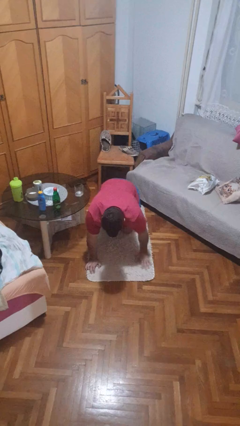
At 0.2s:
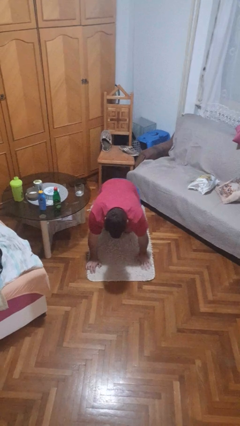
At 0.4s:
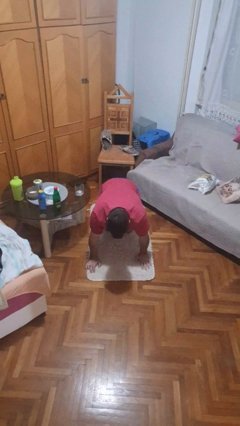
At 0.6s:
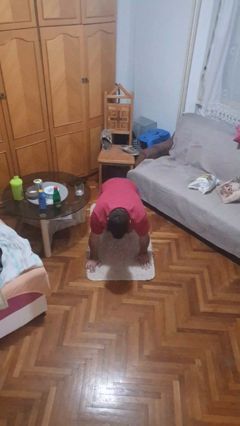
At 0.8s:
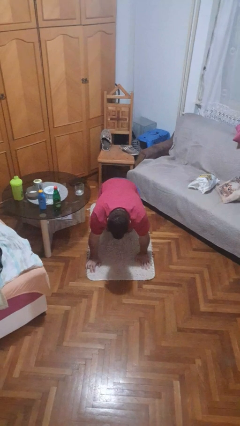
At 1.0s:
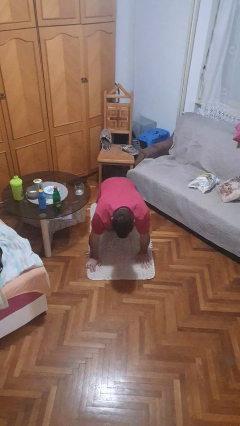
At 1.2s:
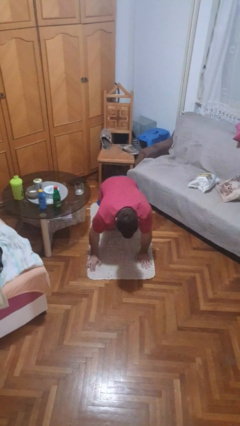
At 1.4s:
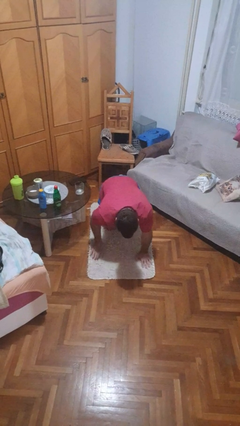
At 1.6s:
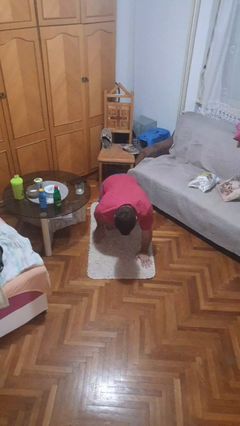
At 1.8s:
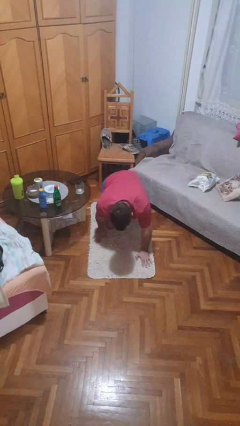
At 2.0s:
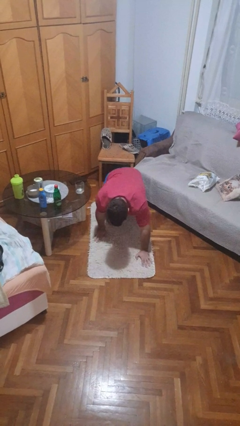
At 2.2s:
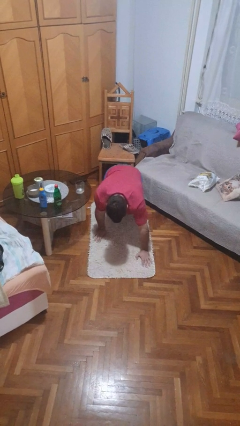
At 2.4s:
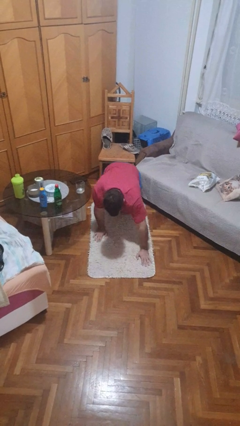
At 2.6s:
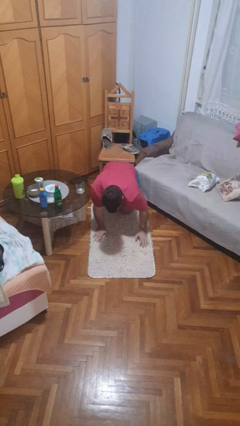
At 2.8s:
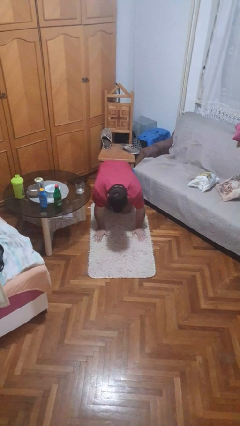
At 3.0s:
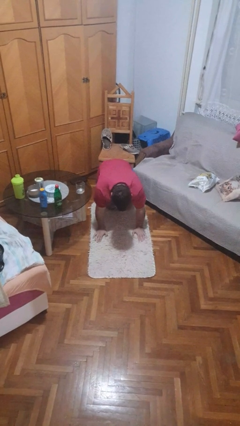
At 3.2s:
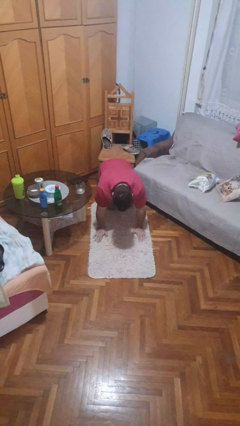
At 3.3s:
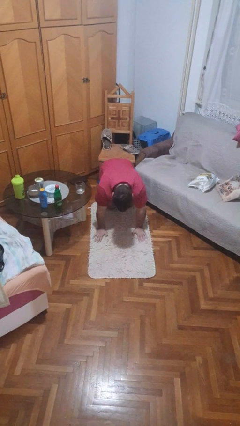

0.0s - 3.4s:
person crawls

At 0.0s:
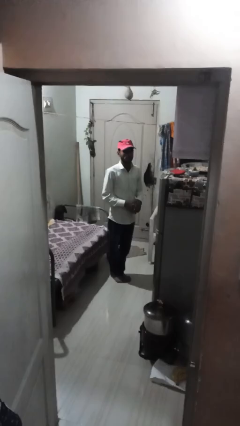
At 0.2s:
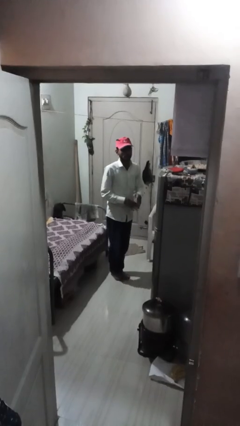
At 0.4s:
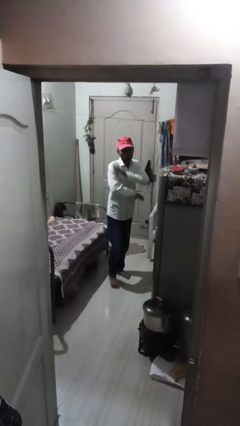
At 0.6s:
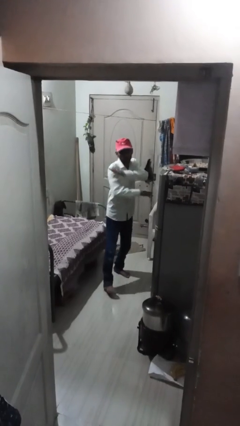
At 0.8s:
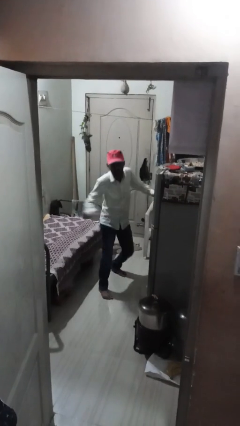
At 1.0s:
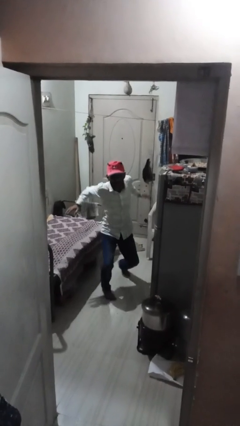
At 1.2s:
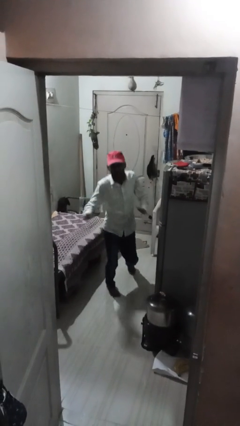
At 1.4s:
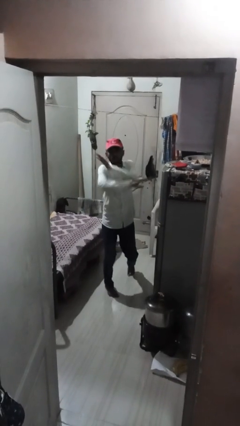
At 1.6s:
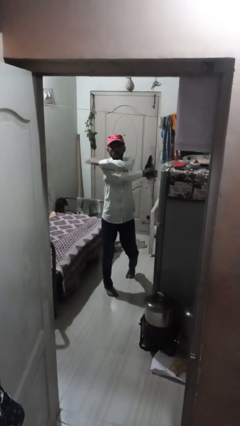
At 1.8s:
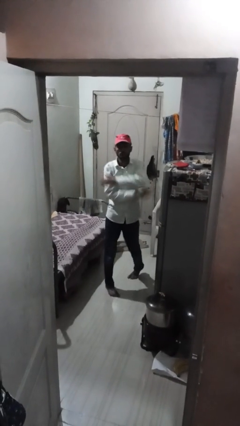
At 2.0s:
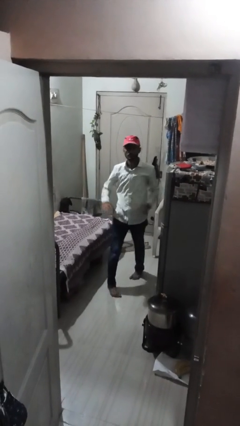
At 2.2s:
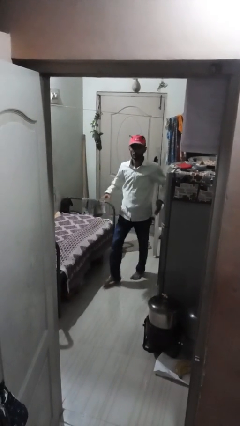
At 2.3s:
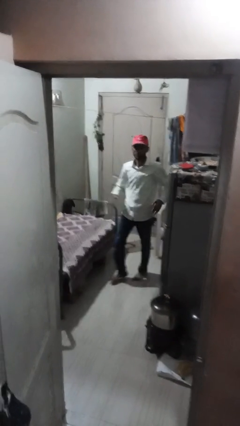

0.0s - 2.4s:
person karate chop

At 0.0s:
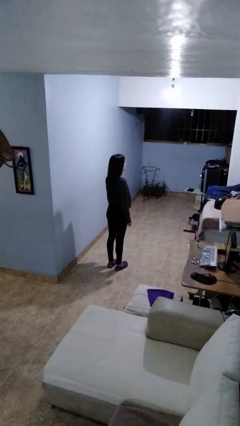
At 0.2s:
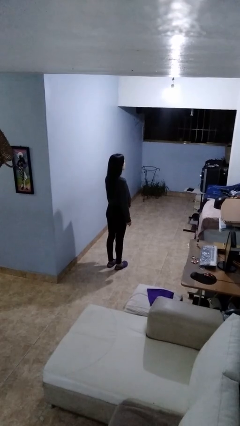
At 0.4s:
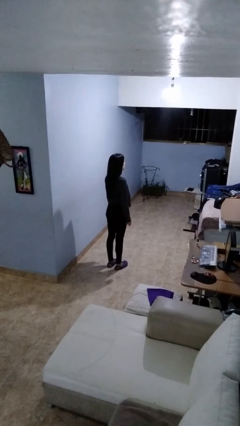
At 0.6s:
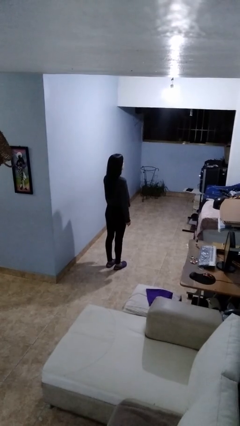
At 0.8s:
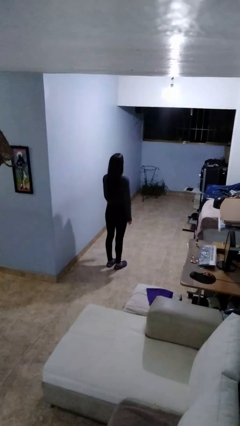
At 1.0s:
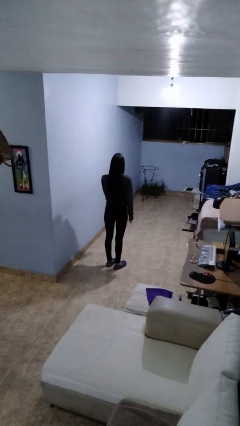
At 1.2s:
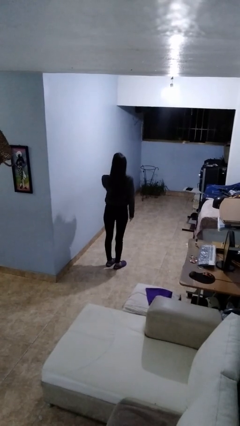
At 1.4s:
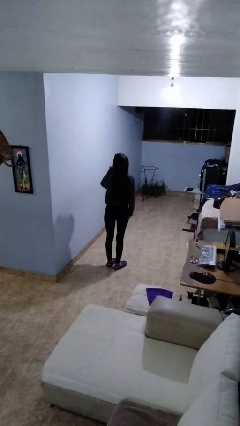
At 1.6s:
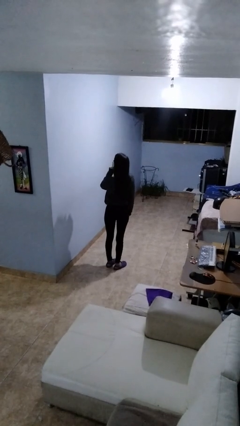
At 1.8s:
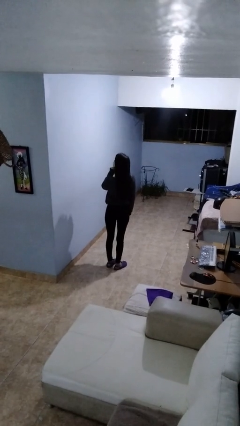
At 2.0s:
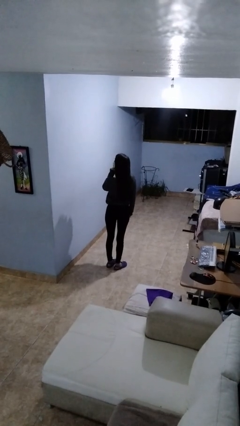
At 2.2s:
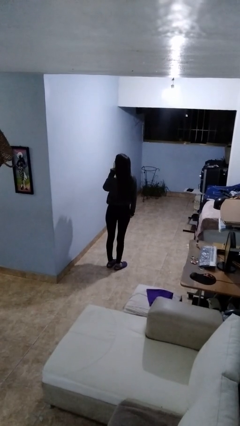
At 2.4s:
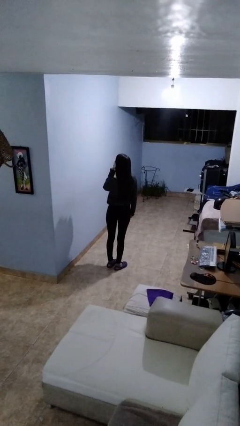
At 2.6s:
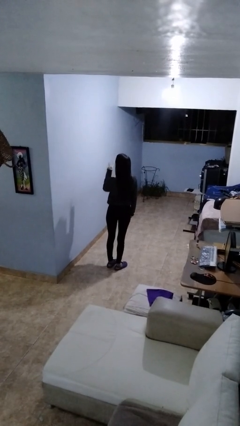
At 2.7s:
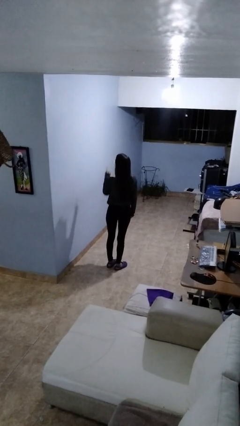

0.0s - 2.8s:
person gestures be quiet

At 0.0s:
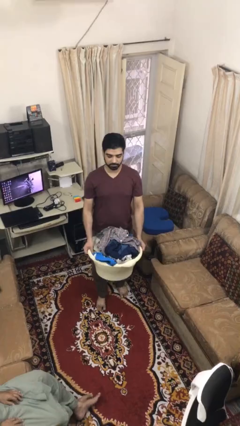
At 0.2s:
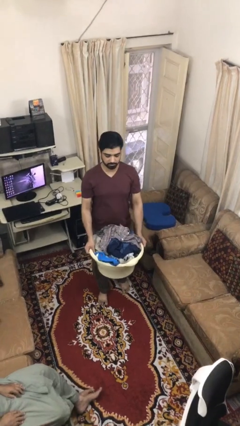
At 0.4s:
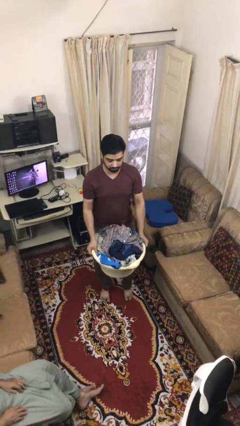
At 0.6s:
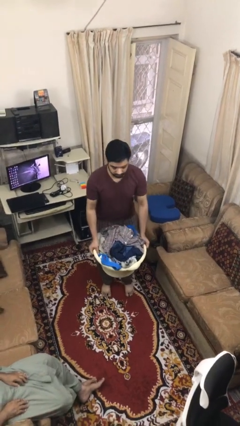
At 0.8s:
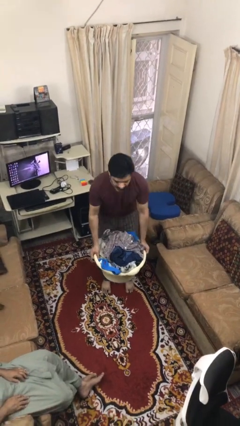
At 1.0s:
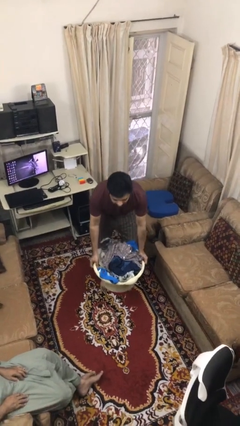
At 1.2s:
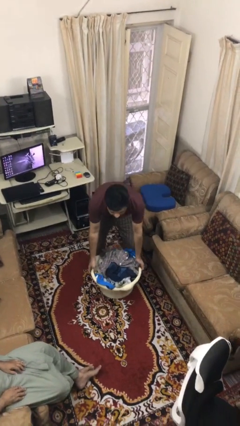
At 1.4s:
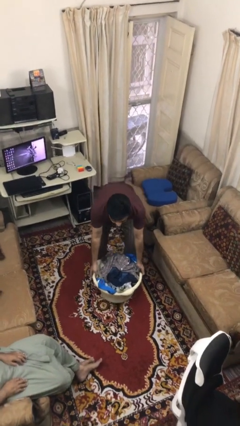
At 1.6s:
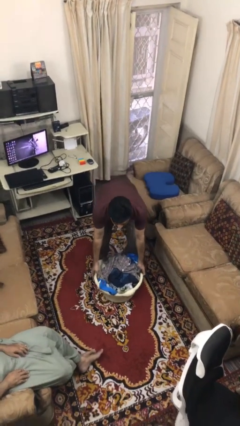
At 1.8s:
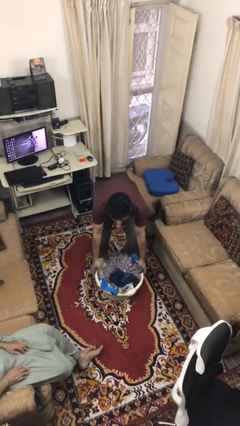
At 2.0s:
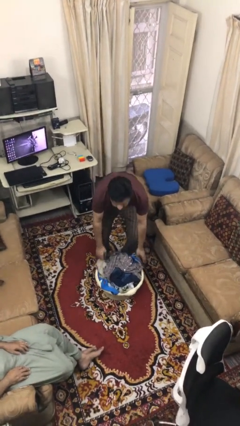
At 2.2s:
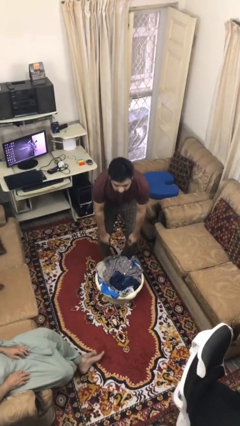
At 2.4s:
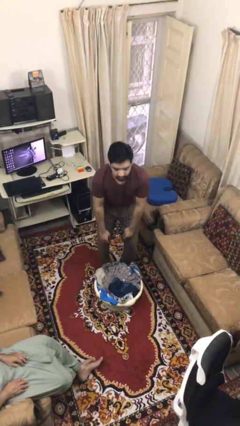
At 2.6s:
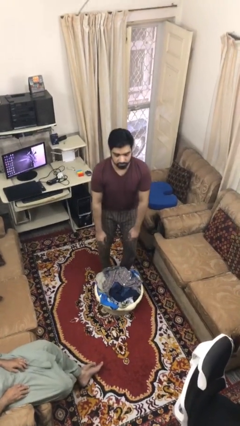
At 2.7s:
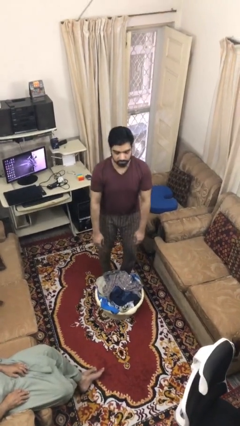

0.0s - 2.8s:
person puts down object on floor

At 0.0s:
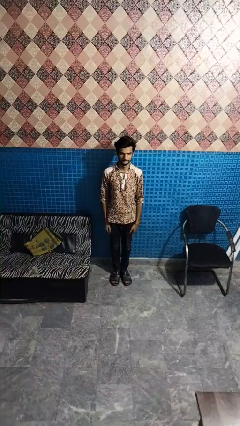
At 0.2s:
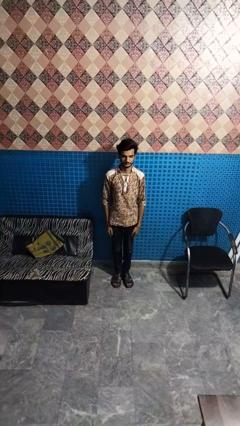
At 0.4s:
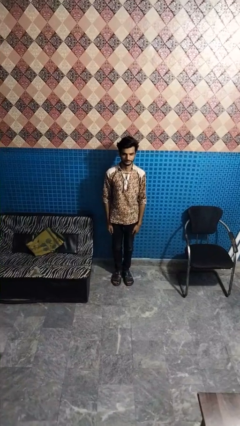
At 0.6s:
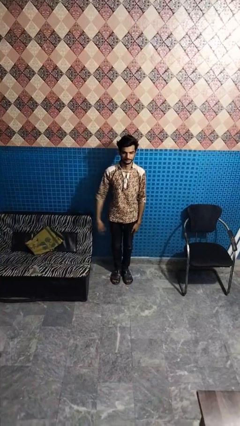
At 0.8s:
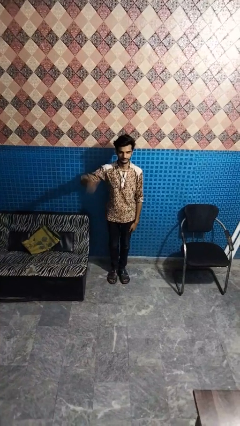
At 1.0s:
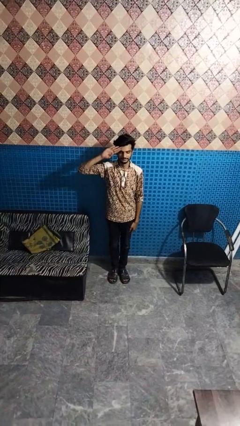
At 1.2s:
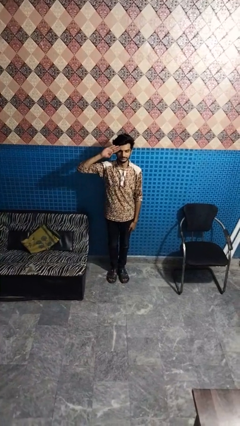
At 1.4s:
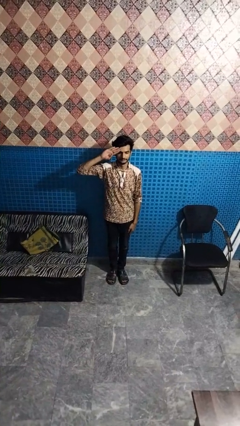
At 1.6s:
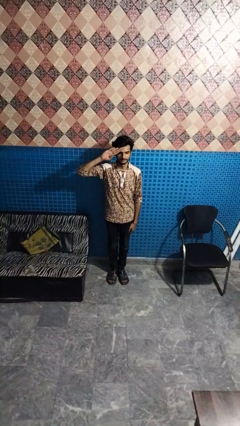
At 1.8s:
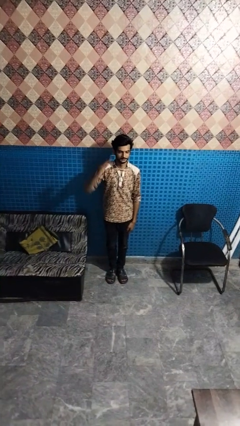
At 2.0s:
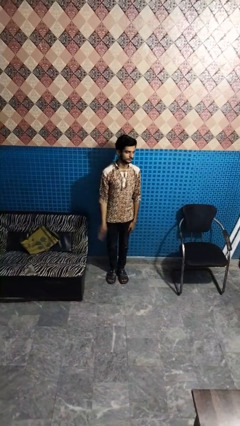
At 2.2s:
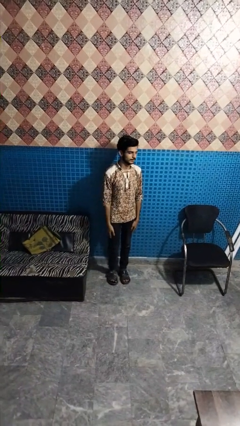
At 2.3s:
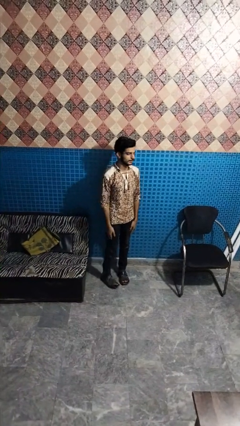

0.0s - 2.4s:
person salutes

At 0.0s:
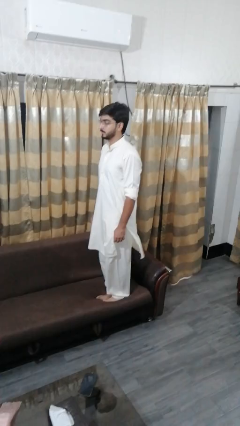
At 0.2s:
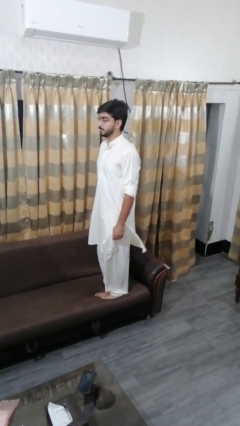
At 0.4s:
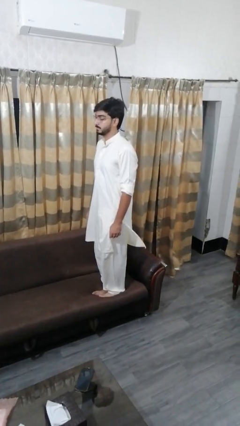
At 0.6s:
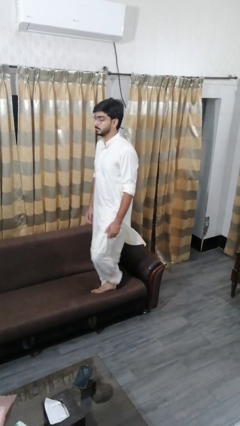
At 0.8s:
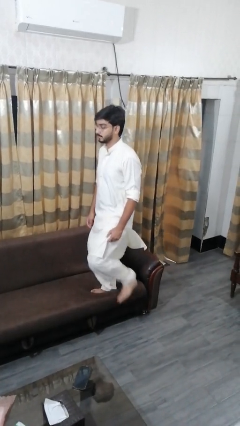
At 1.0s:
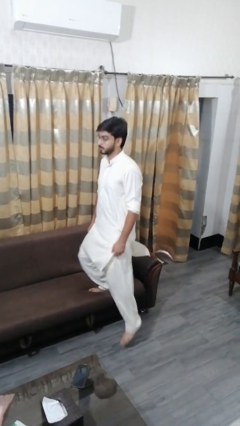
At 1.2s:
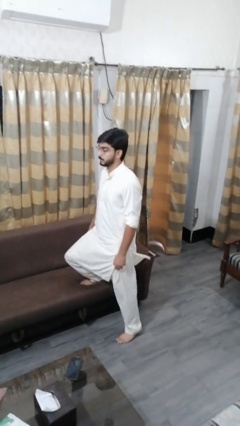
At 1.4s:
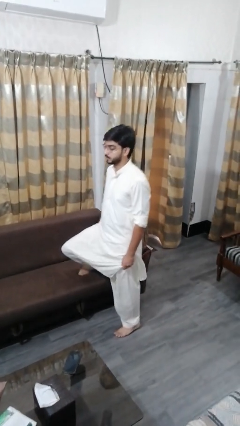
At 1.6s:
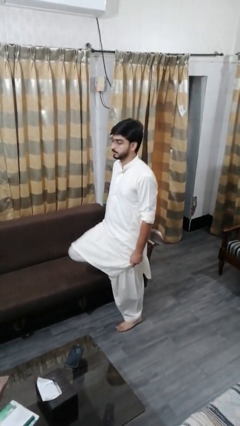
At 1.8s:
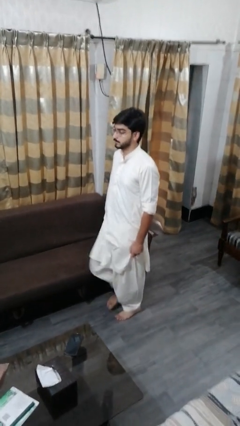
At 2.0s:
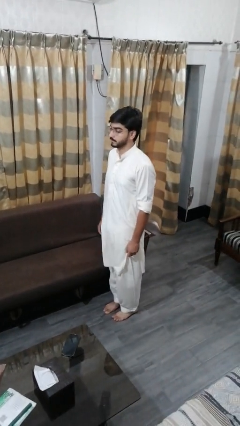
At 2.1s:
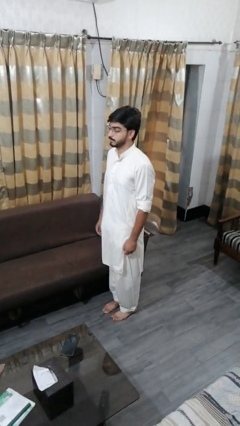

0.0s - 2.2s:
person climbs off couch

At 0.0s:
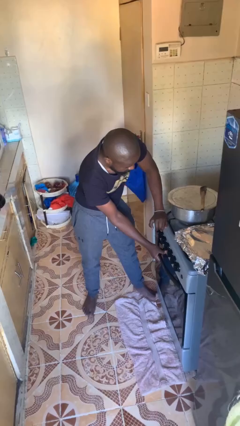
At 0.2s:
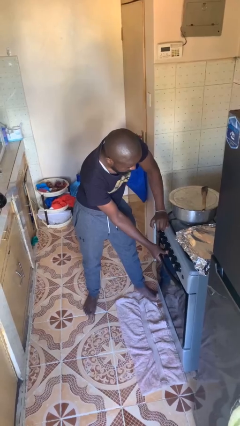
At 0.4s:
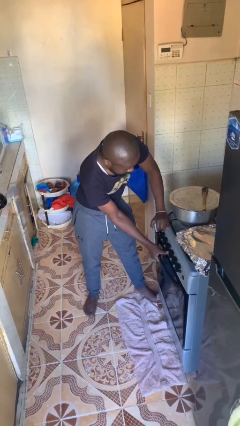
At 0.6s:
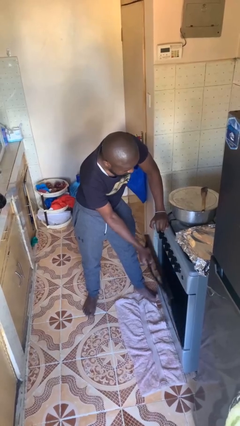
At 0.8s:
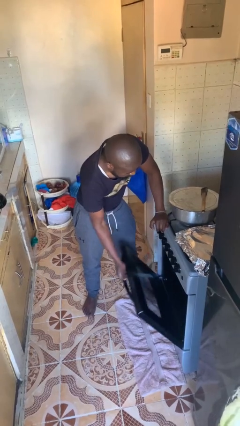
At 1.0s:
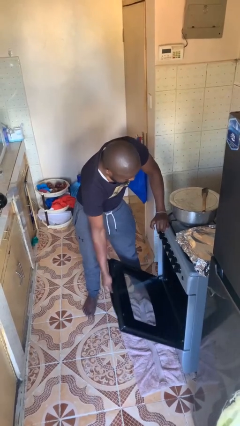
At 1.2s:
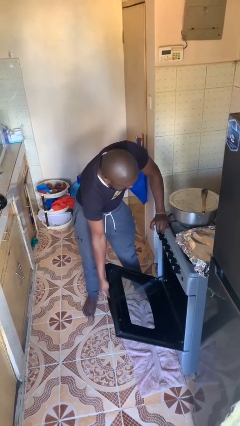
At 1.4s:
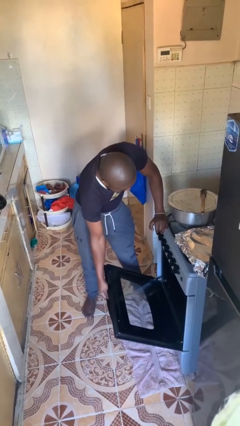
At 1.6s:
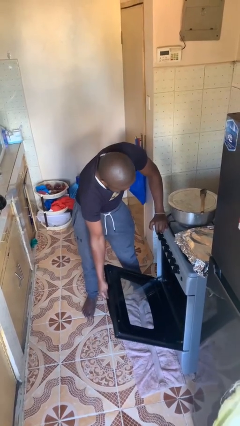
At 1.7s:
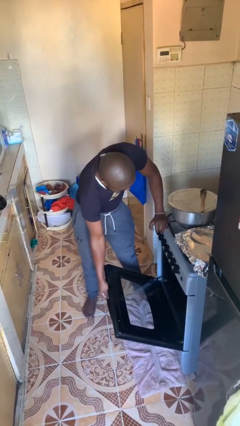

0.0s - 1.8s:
person opens oven door
